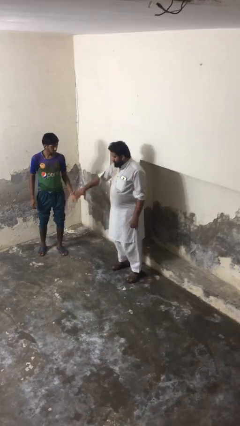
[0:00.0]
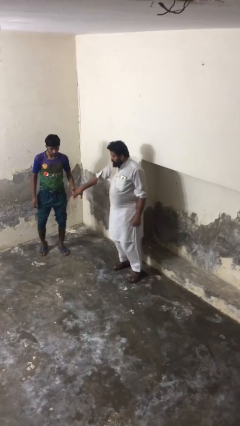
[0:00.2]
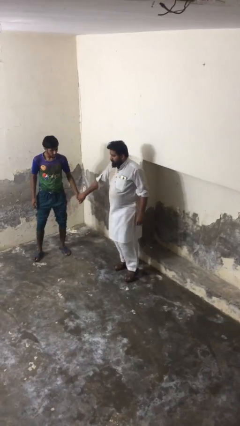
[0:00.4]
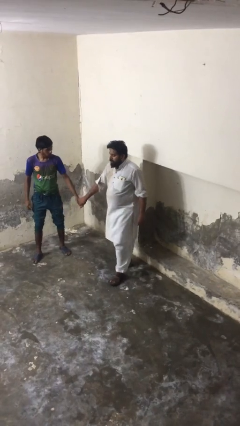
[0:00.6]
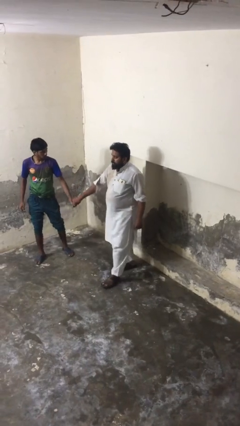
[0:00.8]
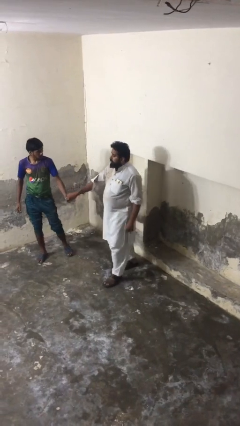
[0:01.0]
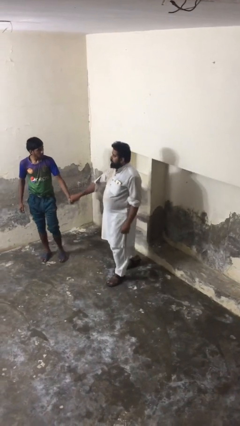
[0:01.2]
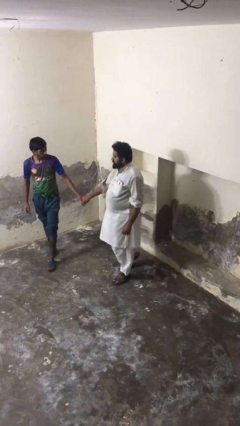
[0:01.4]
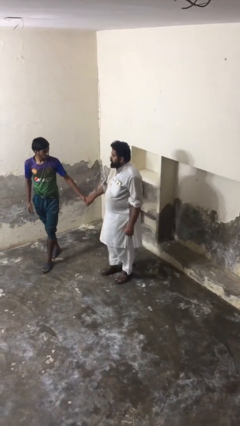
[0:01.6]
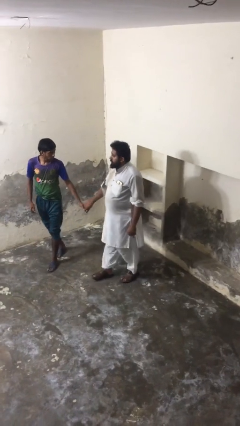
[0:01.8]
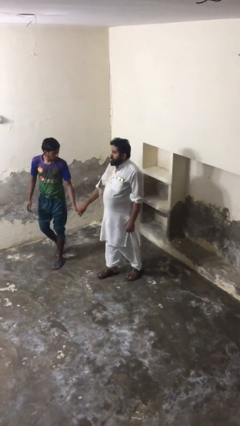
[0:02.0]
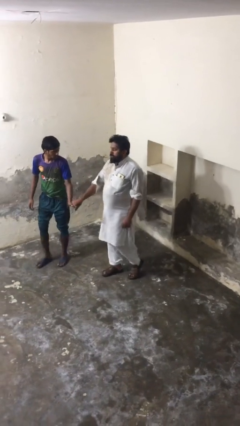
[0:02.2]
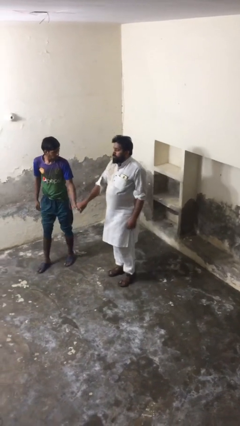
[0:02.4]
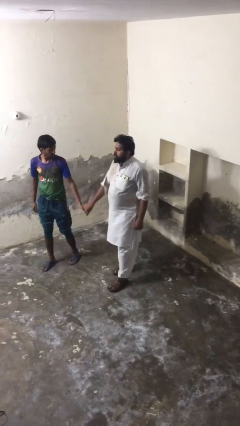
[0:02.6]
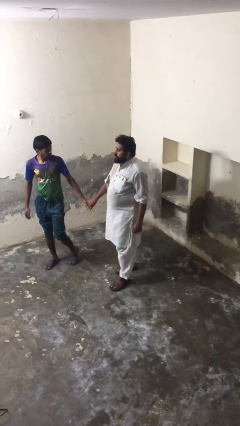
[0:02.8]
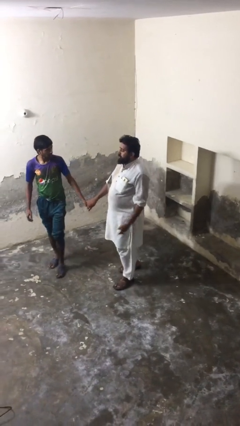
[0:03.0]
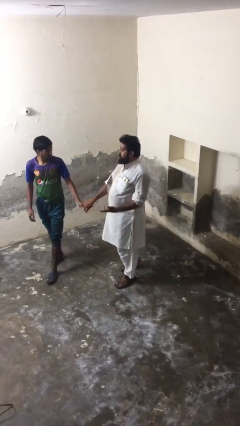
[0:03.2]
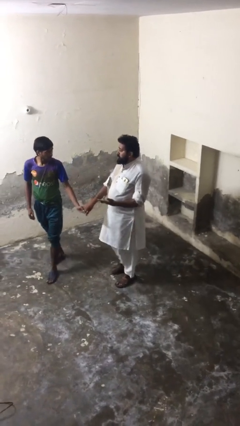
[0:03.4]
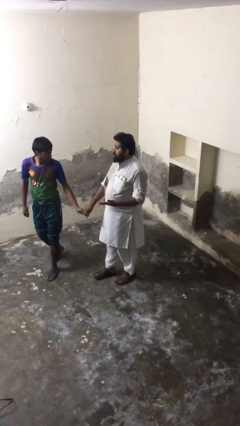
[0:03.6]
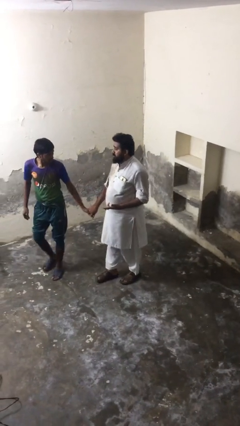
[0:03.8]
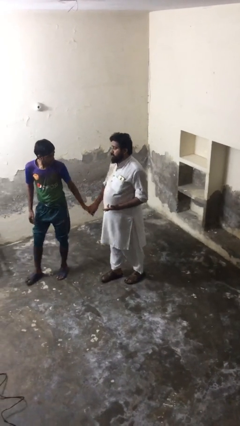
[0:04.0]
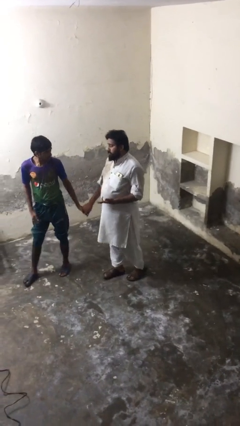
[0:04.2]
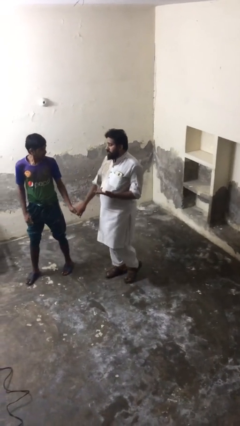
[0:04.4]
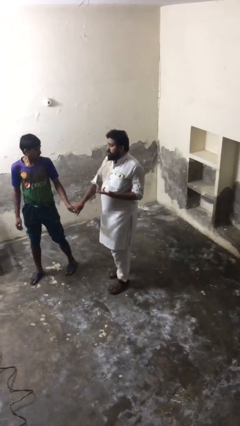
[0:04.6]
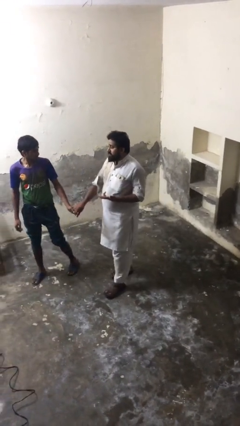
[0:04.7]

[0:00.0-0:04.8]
person holds hand

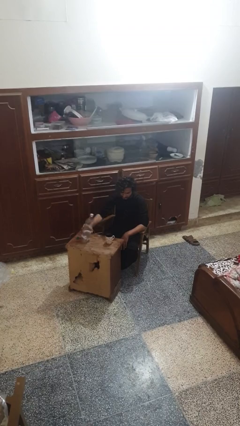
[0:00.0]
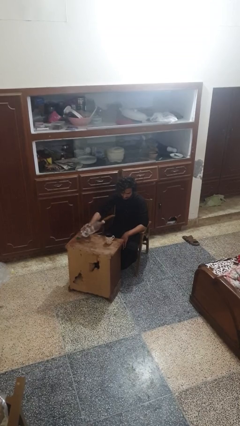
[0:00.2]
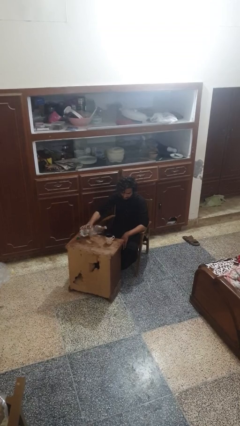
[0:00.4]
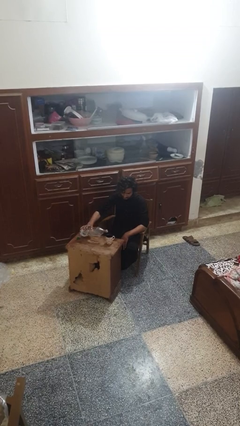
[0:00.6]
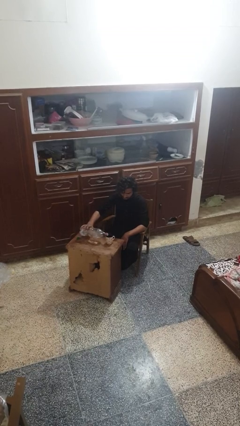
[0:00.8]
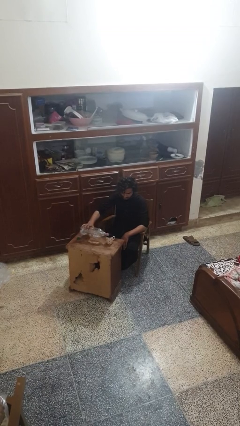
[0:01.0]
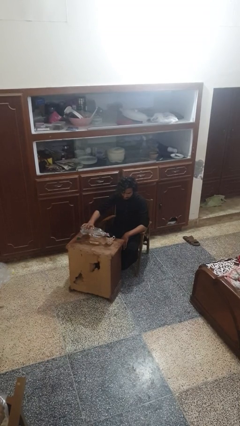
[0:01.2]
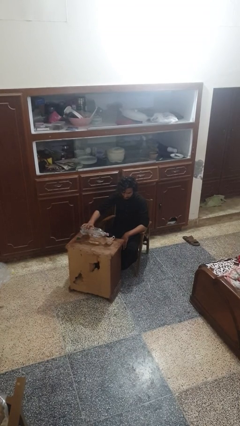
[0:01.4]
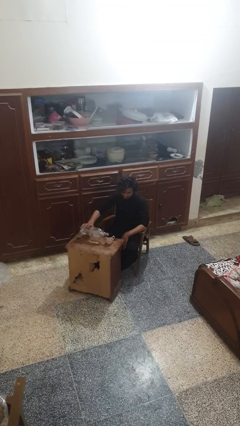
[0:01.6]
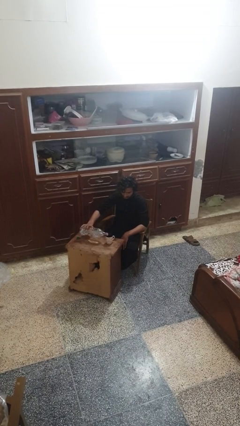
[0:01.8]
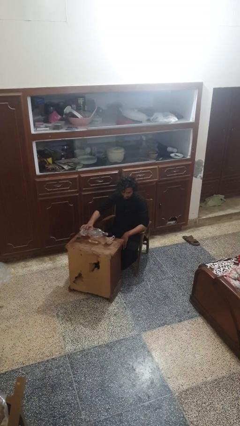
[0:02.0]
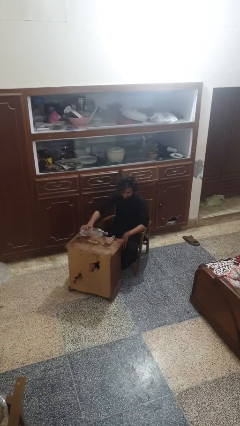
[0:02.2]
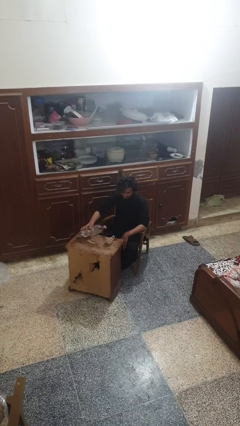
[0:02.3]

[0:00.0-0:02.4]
person pours liquid into cup

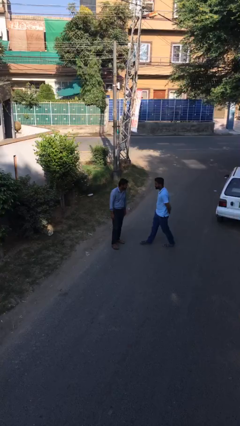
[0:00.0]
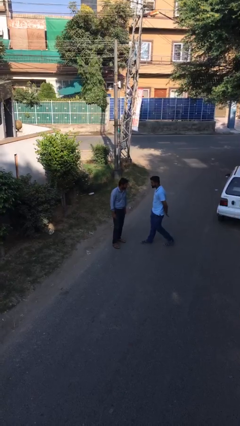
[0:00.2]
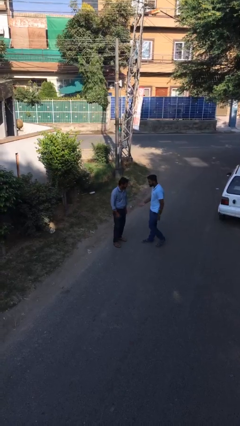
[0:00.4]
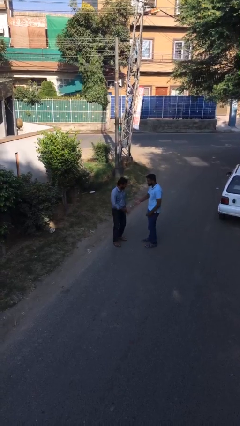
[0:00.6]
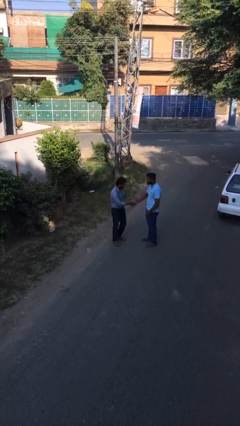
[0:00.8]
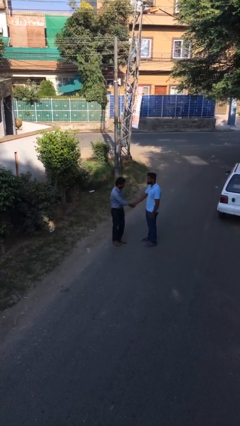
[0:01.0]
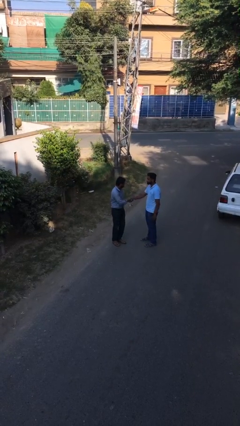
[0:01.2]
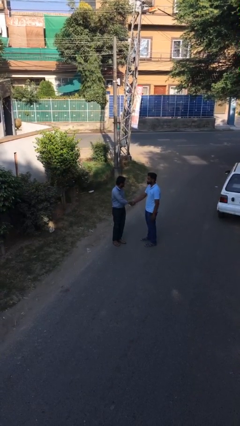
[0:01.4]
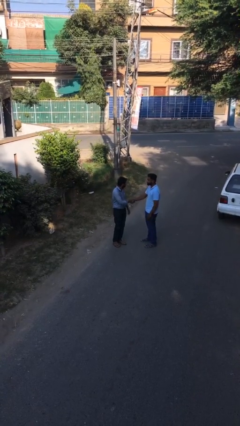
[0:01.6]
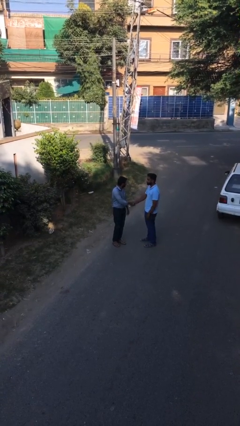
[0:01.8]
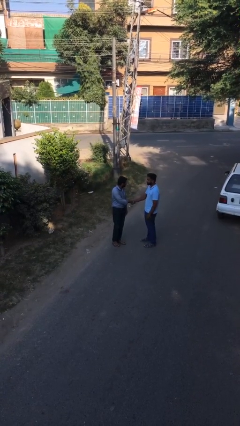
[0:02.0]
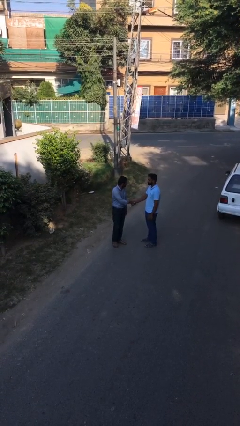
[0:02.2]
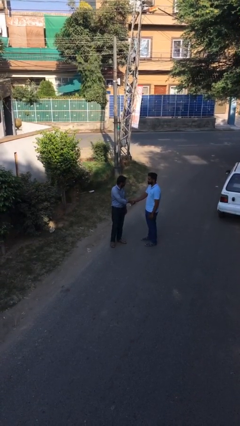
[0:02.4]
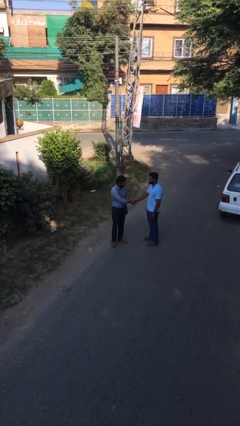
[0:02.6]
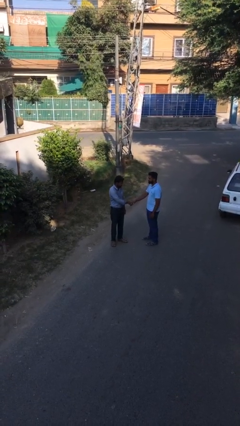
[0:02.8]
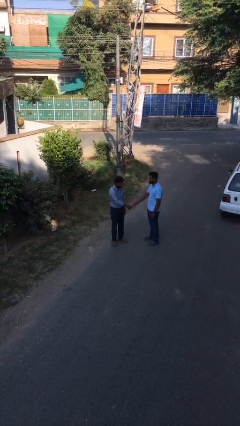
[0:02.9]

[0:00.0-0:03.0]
person shakes hand

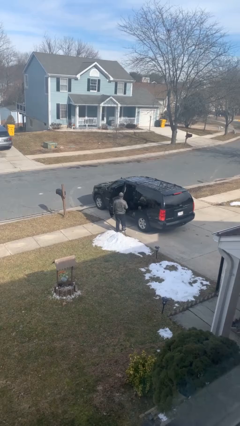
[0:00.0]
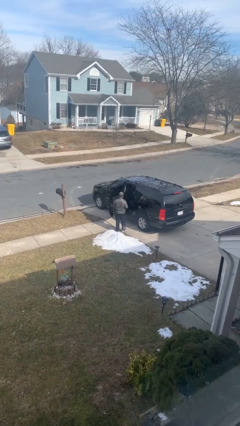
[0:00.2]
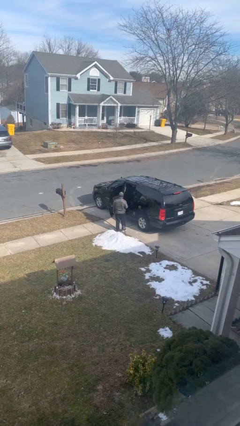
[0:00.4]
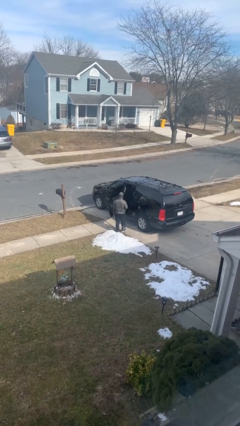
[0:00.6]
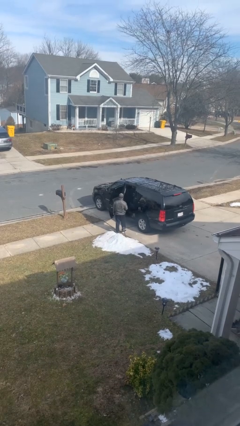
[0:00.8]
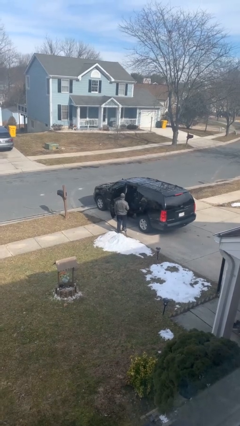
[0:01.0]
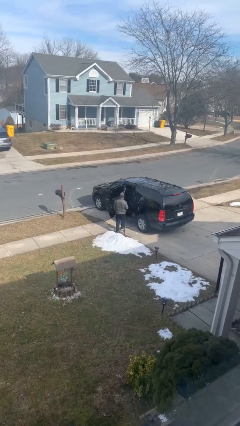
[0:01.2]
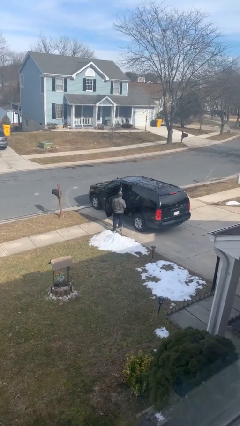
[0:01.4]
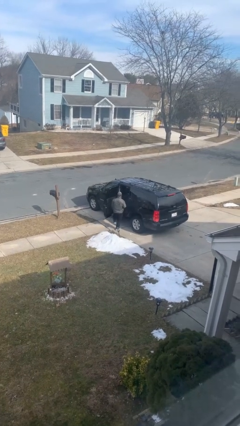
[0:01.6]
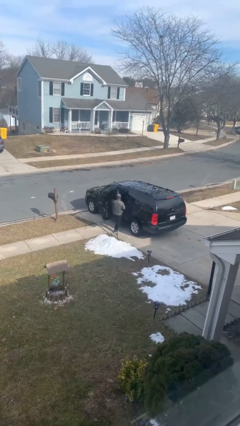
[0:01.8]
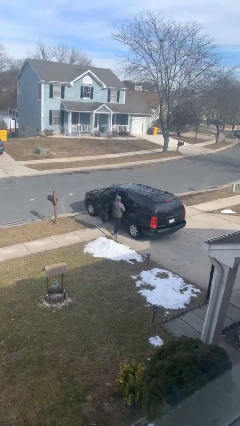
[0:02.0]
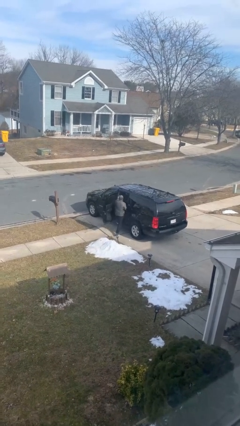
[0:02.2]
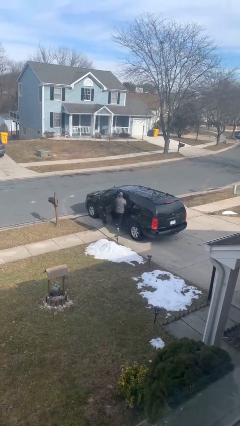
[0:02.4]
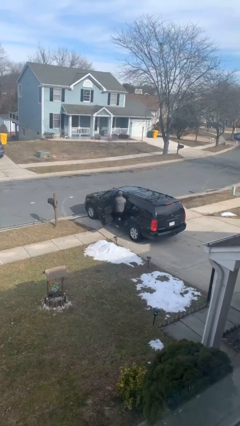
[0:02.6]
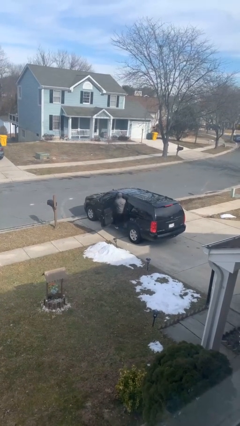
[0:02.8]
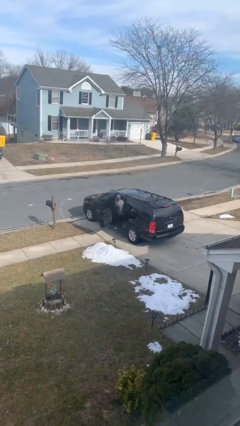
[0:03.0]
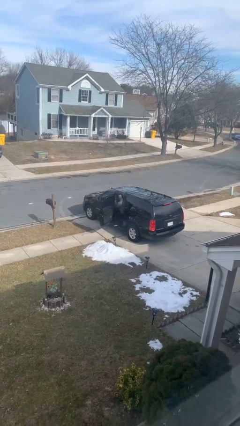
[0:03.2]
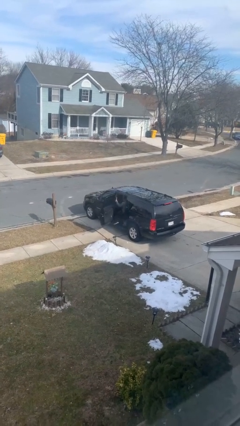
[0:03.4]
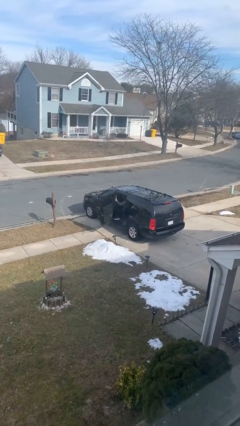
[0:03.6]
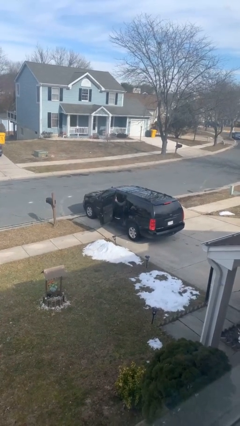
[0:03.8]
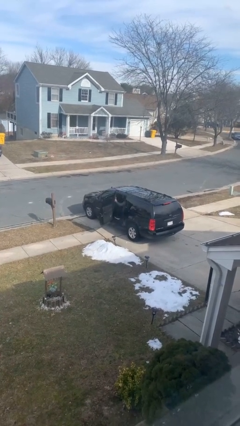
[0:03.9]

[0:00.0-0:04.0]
person enters car

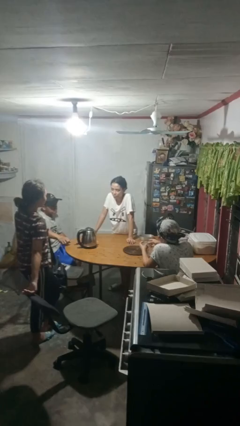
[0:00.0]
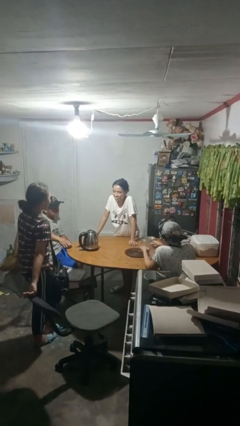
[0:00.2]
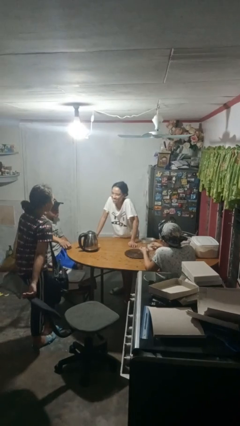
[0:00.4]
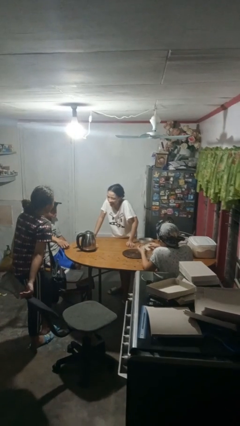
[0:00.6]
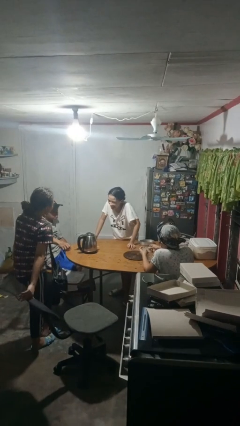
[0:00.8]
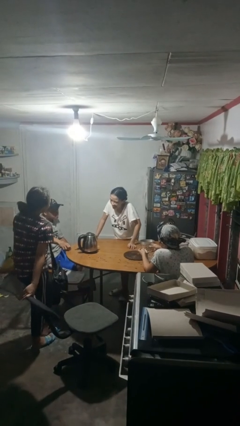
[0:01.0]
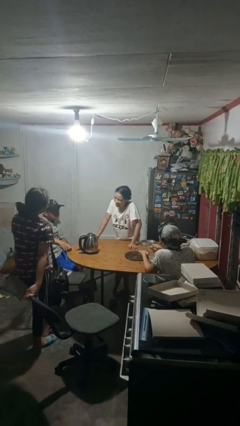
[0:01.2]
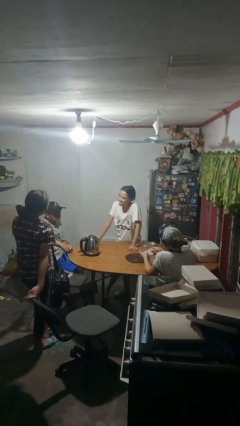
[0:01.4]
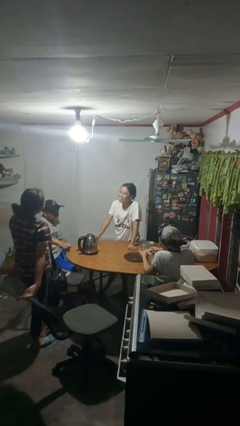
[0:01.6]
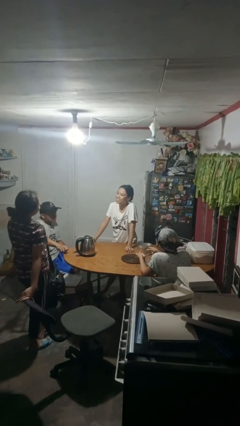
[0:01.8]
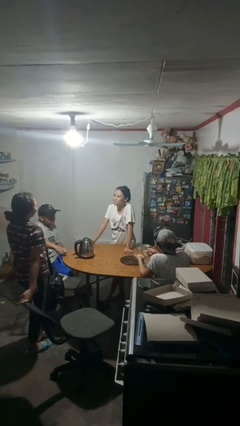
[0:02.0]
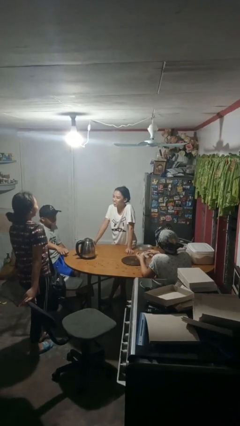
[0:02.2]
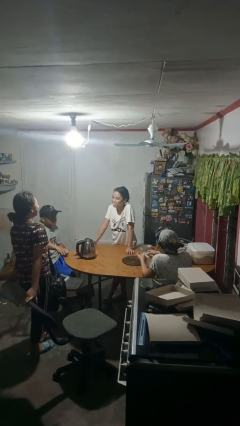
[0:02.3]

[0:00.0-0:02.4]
person laughs with person

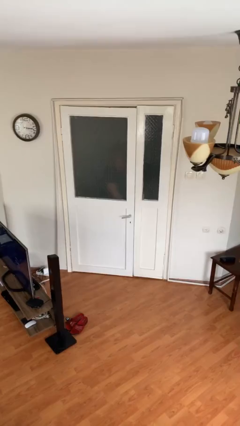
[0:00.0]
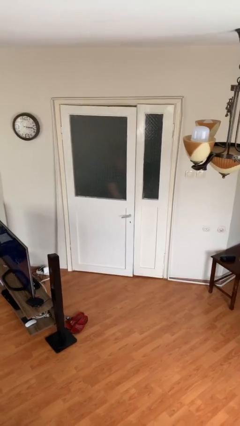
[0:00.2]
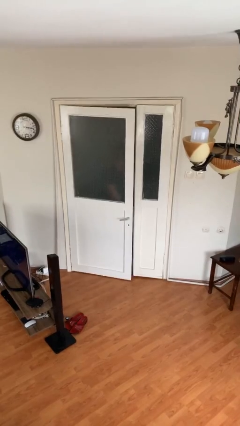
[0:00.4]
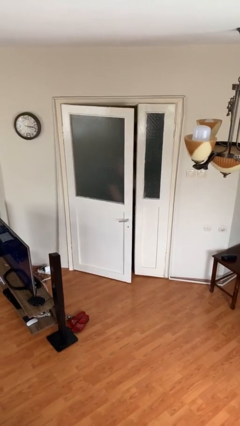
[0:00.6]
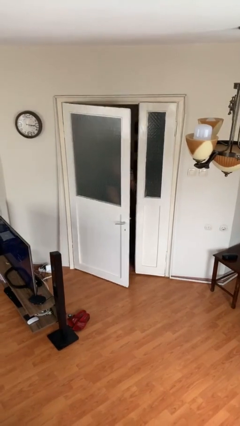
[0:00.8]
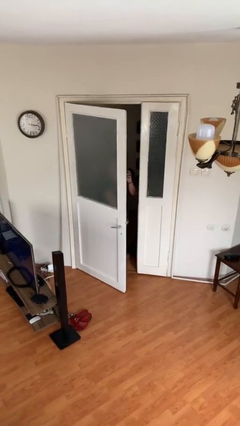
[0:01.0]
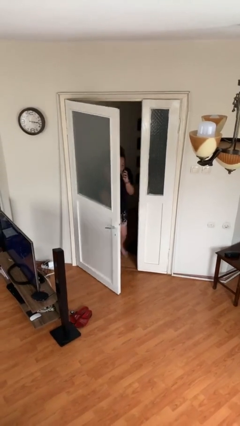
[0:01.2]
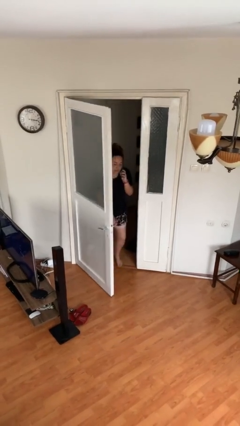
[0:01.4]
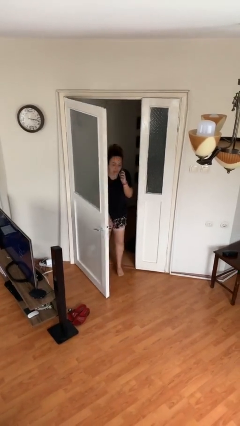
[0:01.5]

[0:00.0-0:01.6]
person opens facility door
